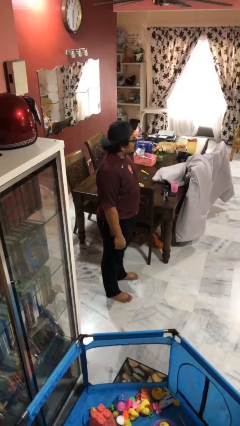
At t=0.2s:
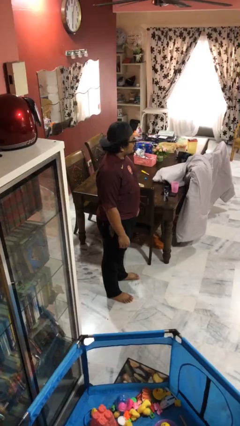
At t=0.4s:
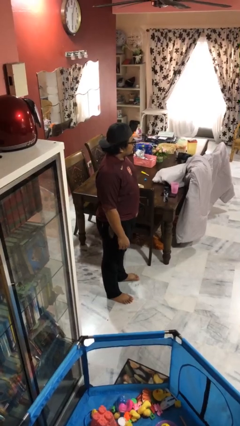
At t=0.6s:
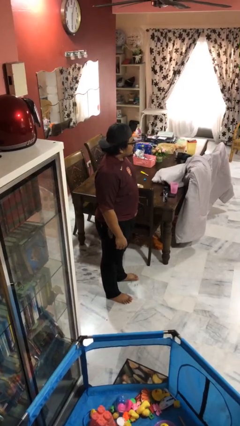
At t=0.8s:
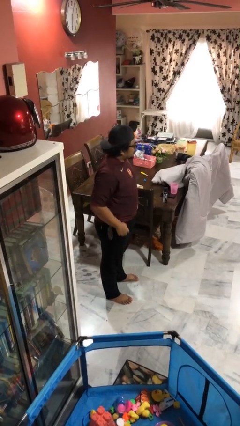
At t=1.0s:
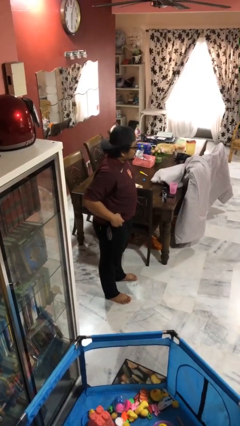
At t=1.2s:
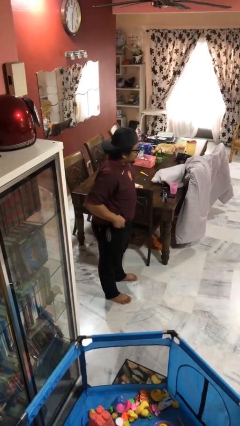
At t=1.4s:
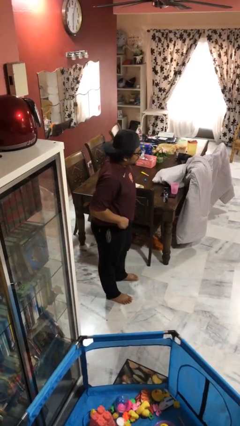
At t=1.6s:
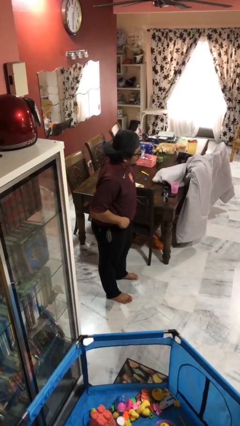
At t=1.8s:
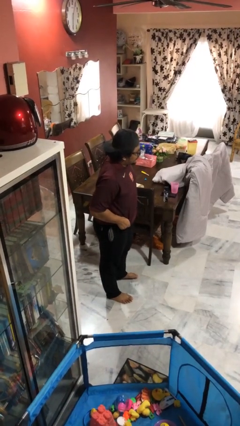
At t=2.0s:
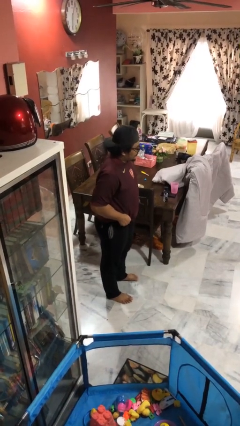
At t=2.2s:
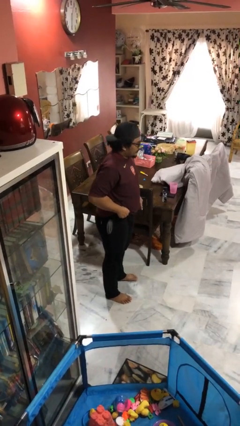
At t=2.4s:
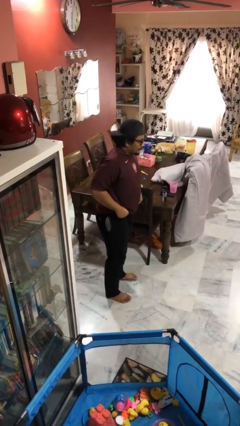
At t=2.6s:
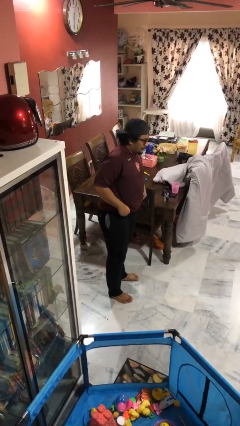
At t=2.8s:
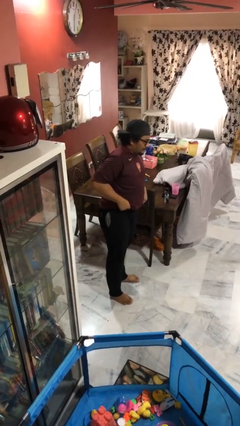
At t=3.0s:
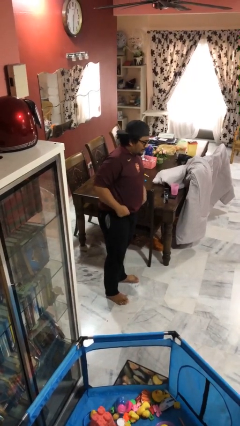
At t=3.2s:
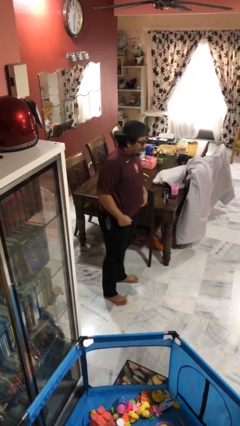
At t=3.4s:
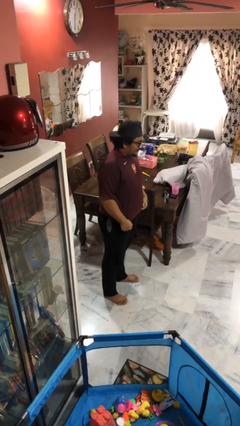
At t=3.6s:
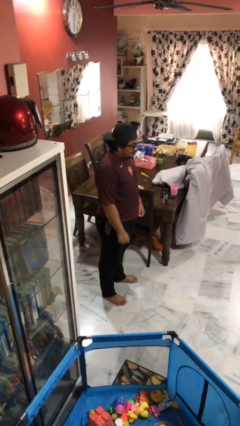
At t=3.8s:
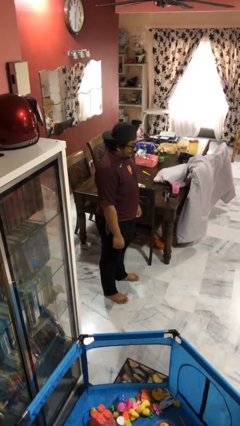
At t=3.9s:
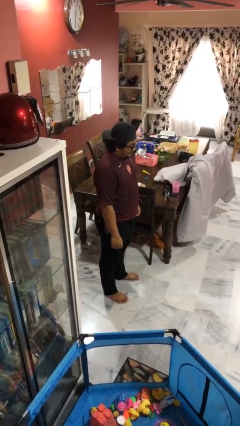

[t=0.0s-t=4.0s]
person hikes up pants

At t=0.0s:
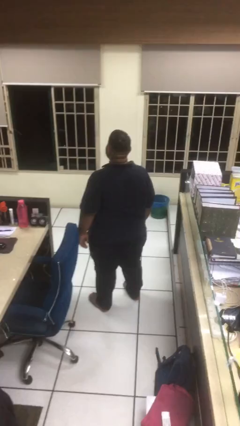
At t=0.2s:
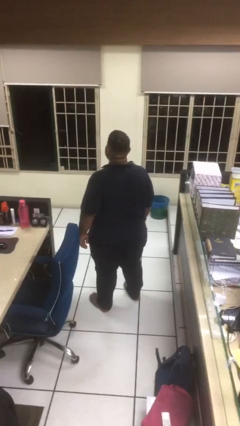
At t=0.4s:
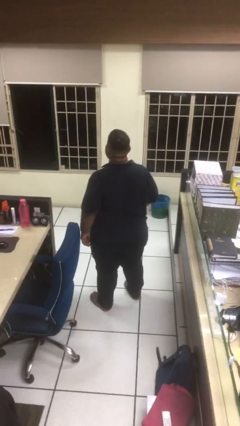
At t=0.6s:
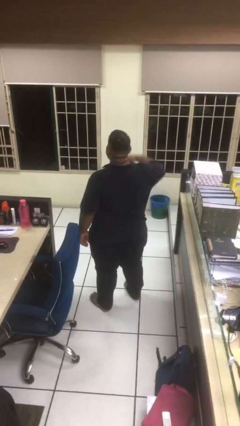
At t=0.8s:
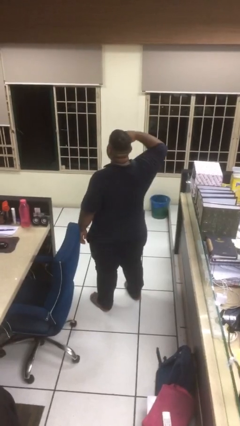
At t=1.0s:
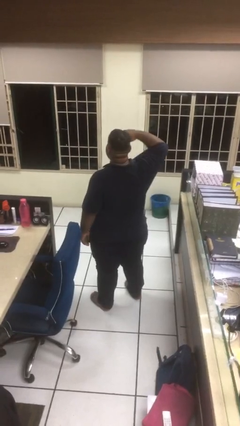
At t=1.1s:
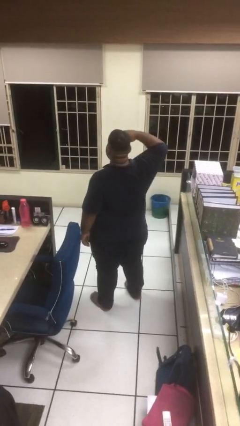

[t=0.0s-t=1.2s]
person salutes

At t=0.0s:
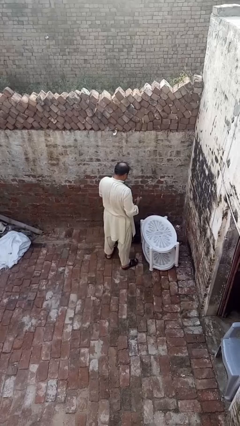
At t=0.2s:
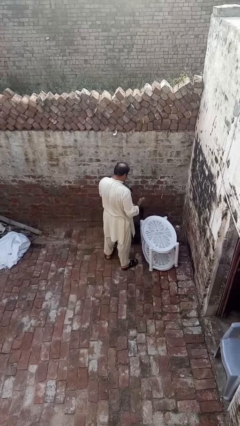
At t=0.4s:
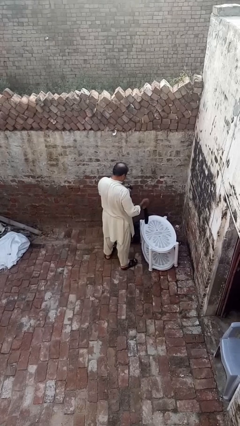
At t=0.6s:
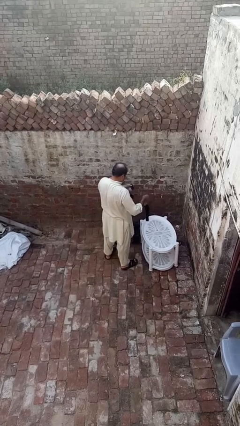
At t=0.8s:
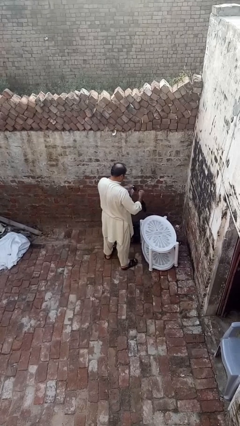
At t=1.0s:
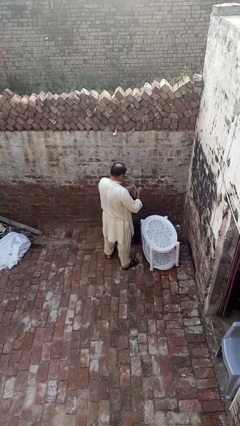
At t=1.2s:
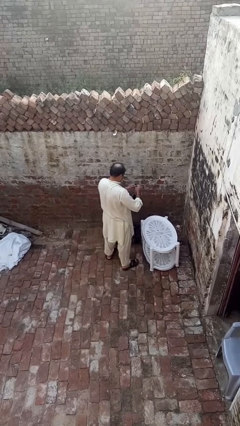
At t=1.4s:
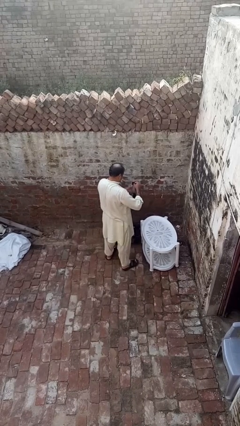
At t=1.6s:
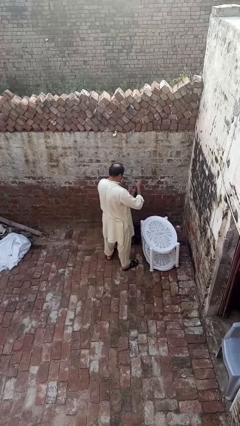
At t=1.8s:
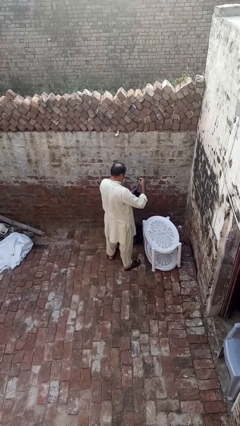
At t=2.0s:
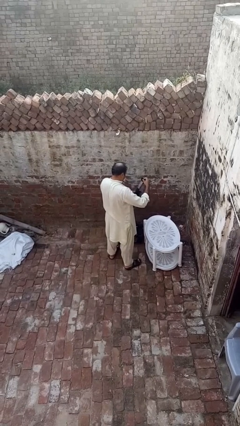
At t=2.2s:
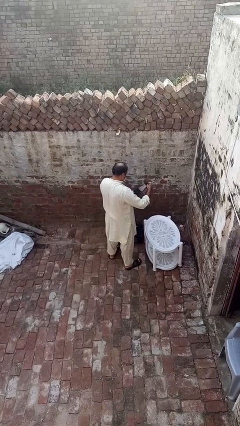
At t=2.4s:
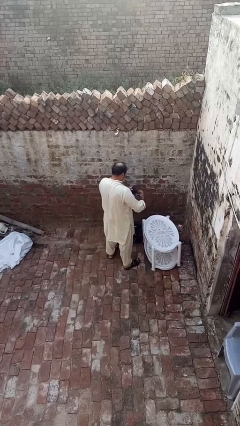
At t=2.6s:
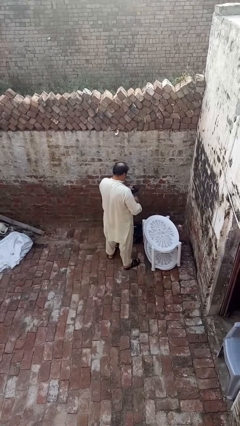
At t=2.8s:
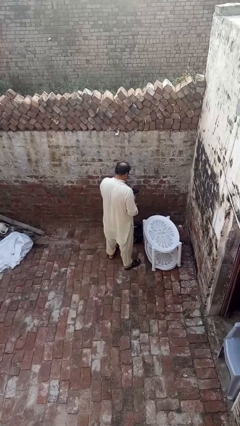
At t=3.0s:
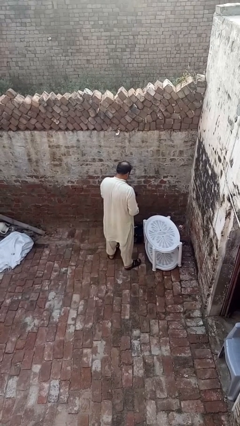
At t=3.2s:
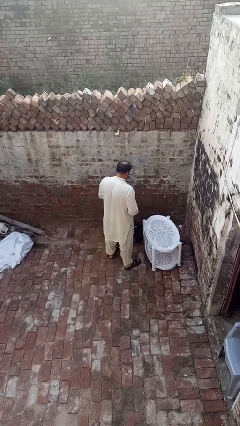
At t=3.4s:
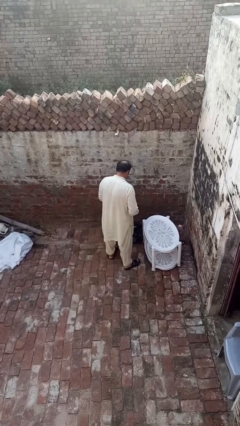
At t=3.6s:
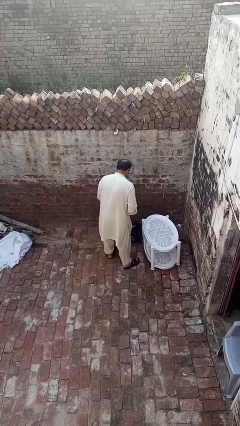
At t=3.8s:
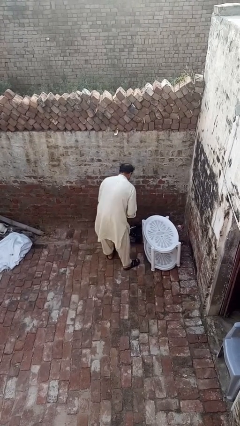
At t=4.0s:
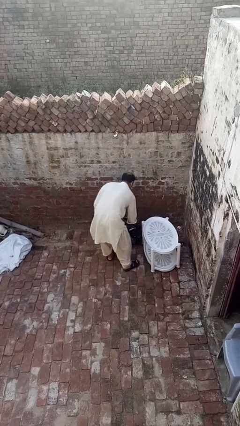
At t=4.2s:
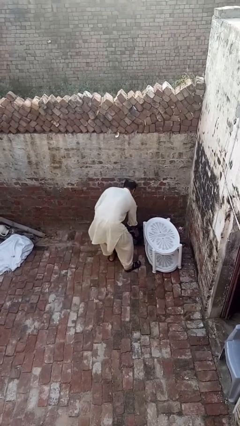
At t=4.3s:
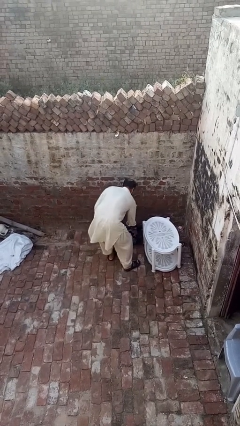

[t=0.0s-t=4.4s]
person folds socks

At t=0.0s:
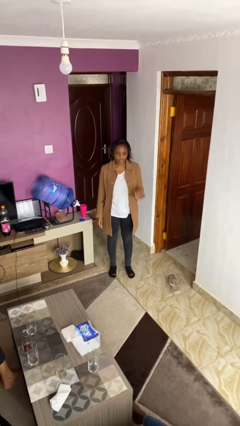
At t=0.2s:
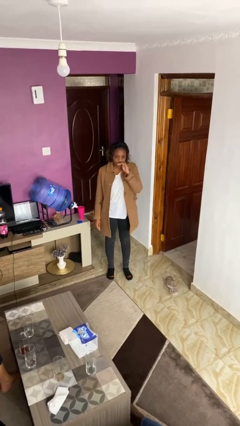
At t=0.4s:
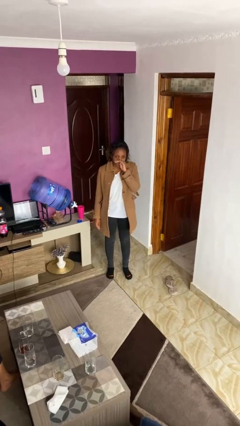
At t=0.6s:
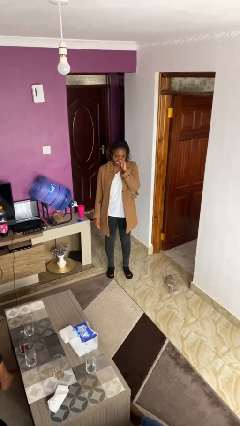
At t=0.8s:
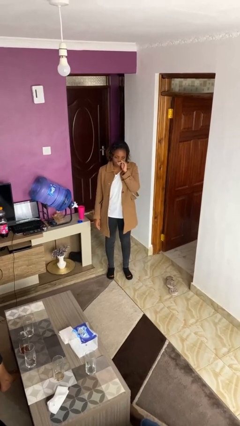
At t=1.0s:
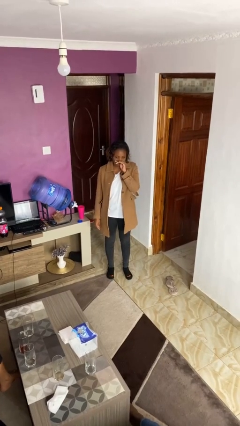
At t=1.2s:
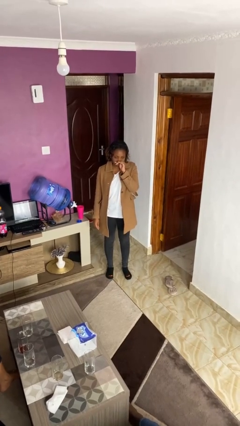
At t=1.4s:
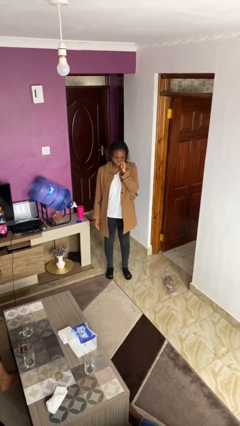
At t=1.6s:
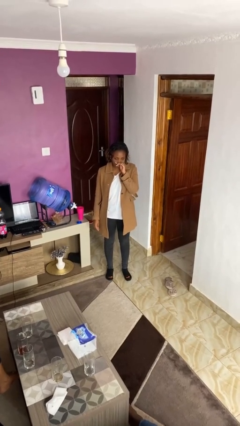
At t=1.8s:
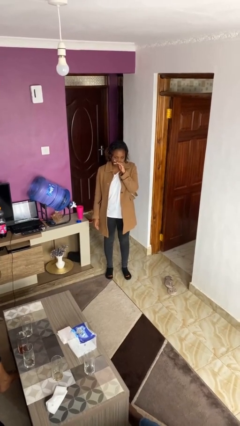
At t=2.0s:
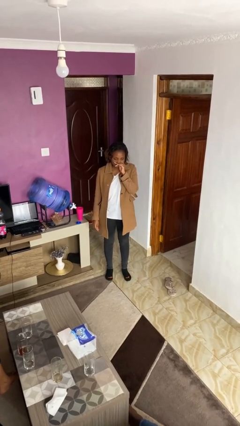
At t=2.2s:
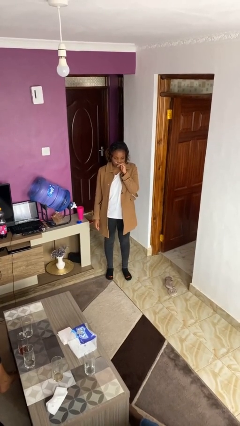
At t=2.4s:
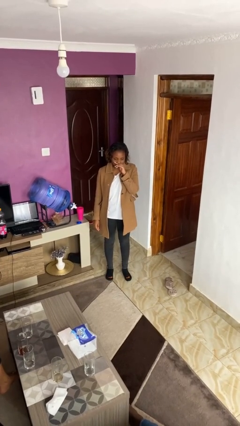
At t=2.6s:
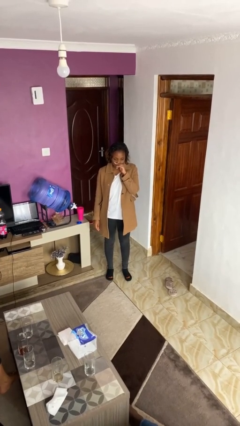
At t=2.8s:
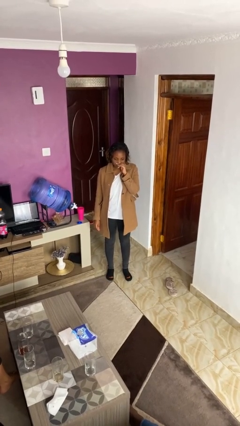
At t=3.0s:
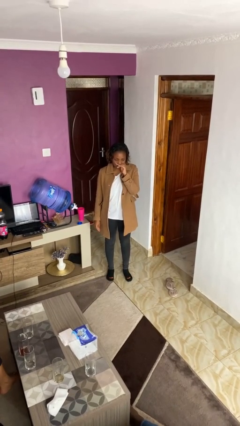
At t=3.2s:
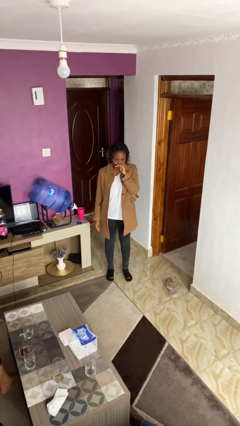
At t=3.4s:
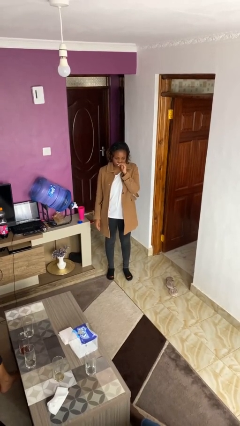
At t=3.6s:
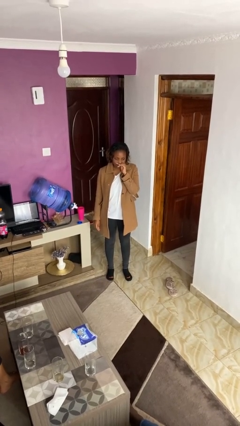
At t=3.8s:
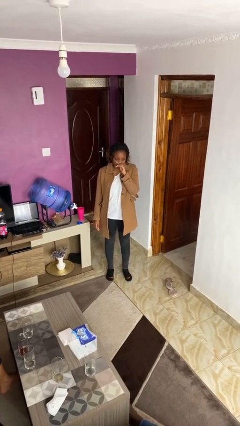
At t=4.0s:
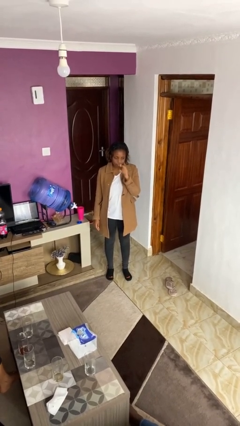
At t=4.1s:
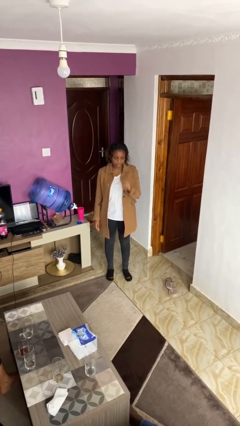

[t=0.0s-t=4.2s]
person scratches face

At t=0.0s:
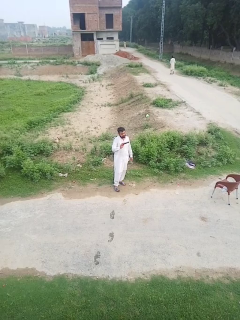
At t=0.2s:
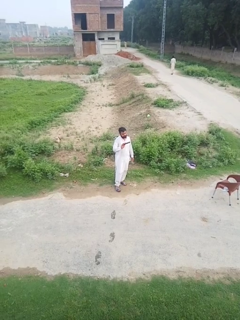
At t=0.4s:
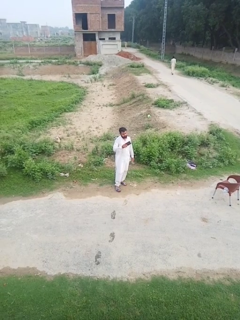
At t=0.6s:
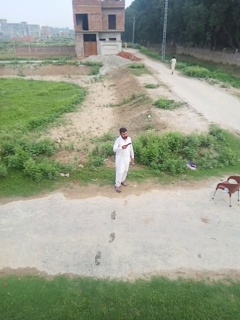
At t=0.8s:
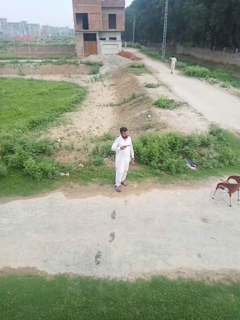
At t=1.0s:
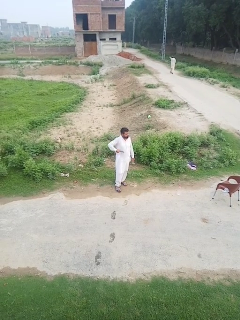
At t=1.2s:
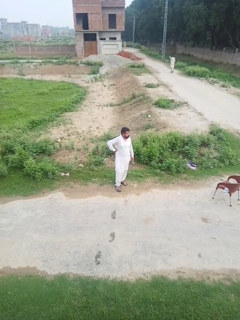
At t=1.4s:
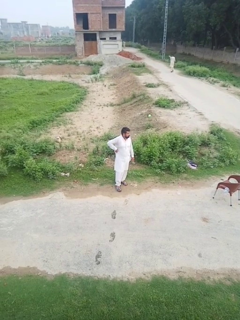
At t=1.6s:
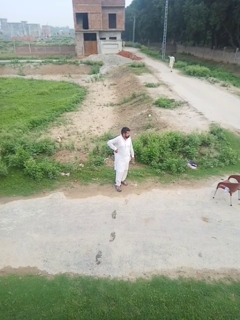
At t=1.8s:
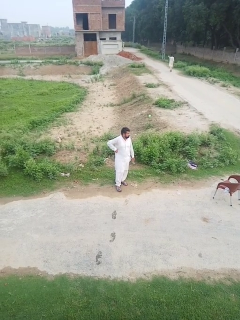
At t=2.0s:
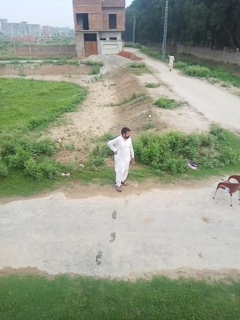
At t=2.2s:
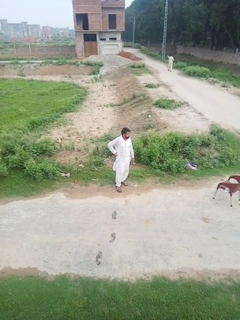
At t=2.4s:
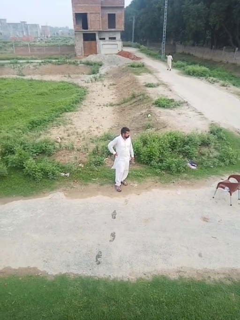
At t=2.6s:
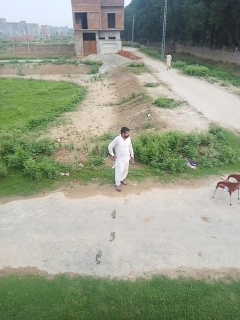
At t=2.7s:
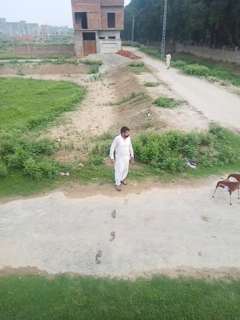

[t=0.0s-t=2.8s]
person puts phone into pocket

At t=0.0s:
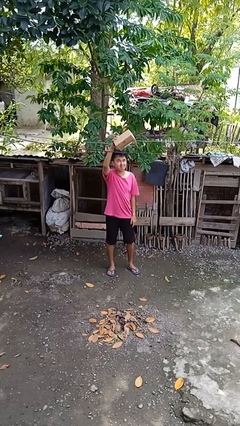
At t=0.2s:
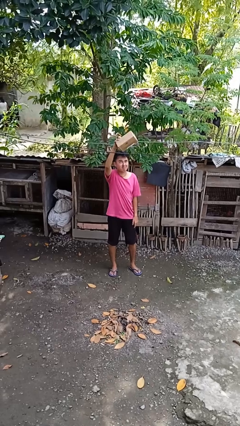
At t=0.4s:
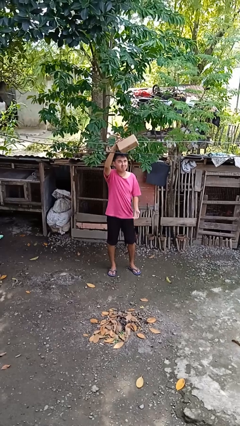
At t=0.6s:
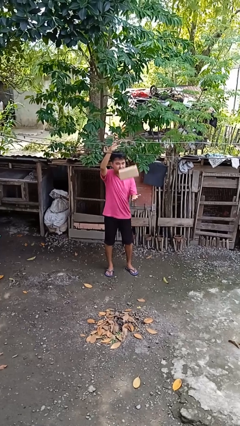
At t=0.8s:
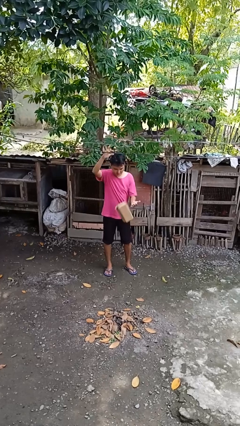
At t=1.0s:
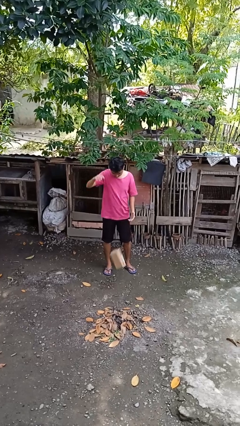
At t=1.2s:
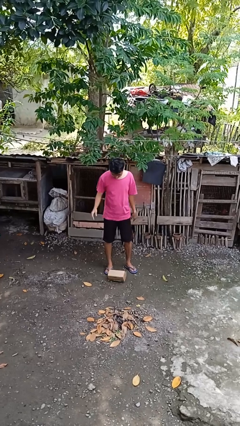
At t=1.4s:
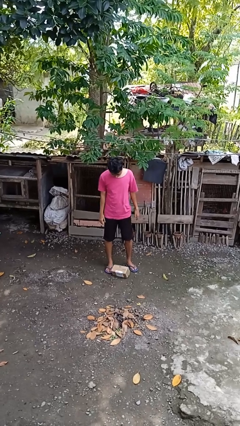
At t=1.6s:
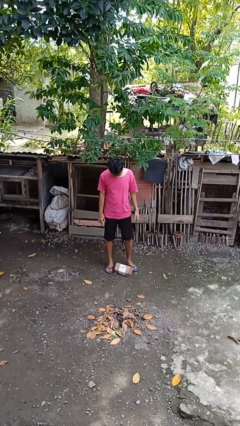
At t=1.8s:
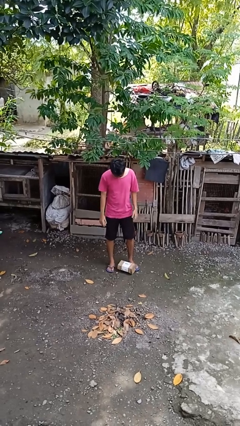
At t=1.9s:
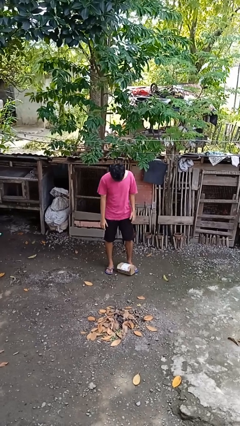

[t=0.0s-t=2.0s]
person drops object
